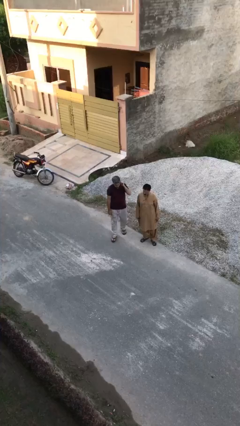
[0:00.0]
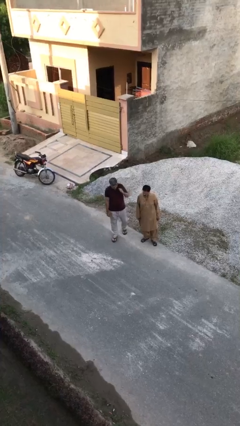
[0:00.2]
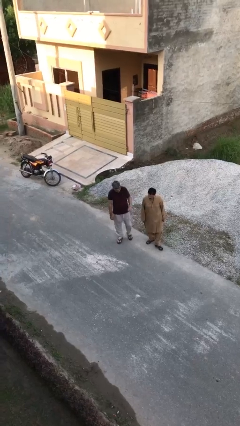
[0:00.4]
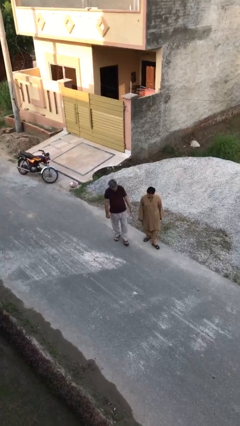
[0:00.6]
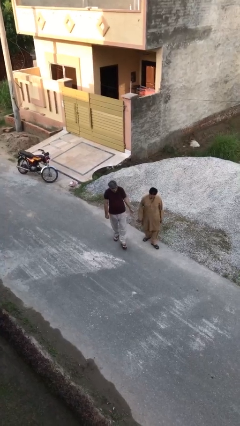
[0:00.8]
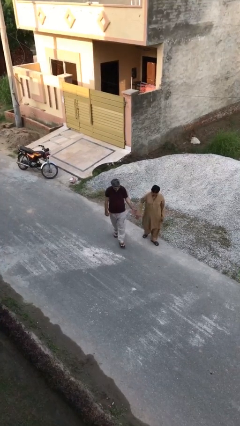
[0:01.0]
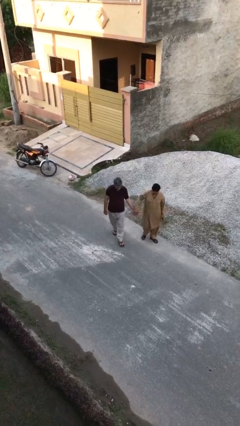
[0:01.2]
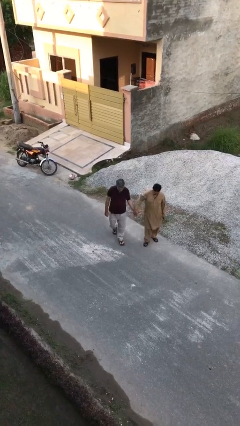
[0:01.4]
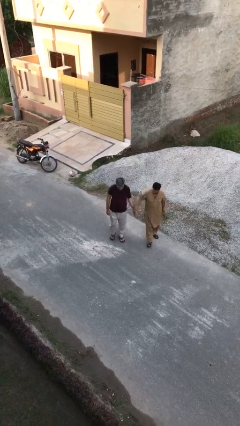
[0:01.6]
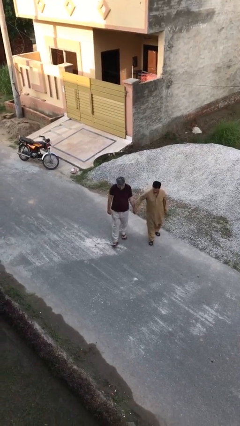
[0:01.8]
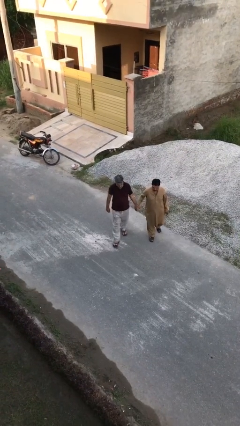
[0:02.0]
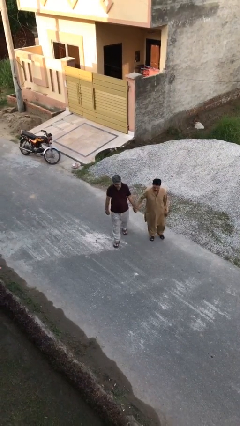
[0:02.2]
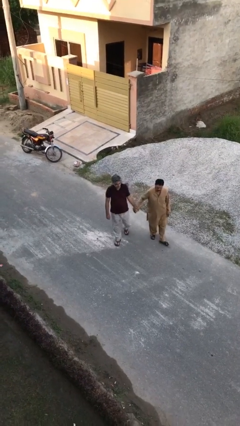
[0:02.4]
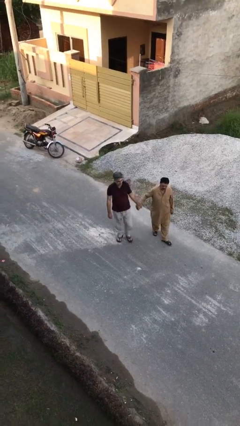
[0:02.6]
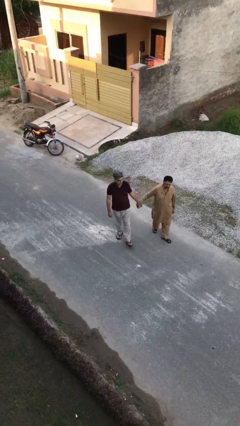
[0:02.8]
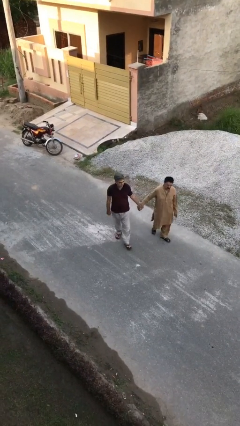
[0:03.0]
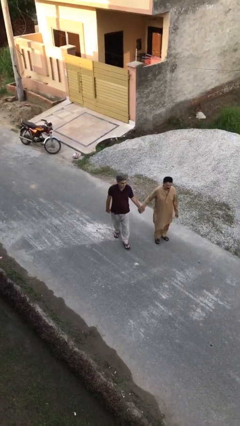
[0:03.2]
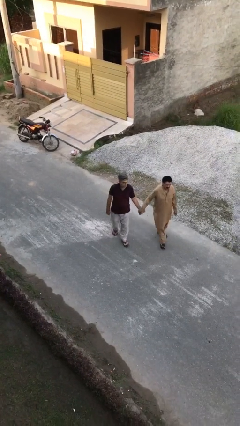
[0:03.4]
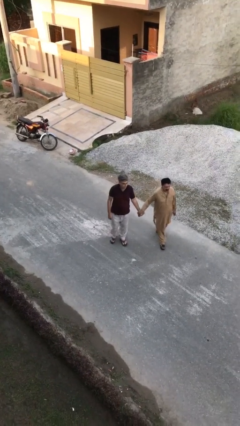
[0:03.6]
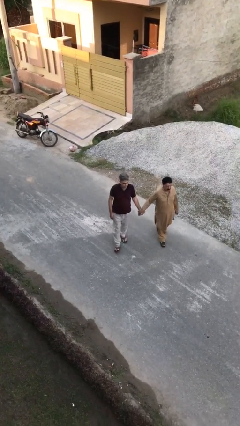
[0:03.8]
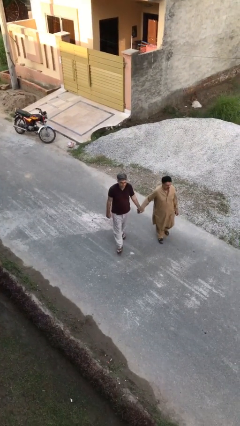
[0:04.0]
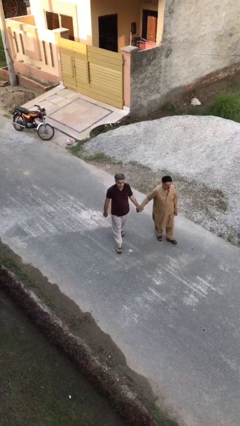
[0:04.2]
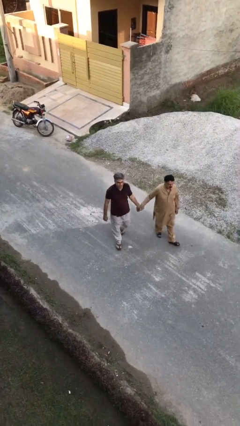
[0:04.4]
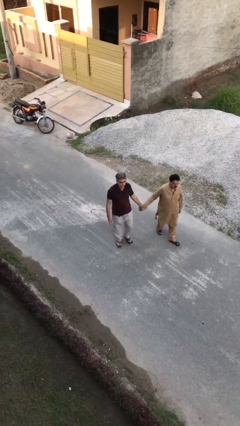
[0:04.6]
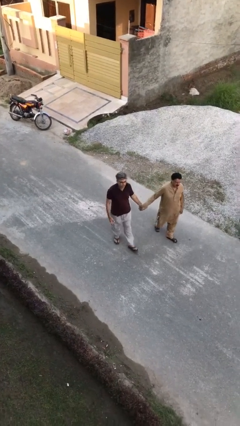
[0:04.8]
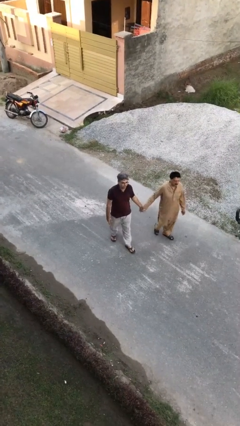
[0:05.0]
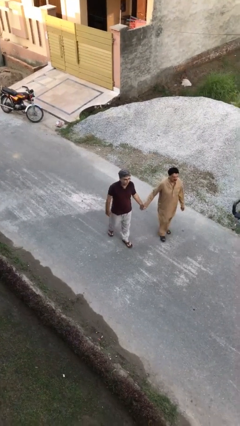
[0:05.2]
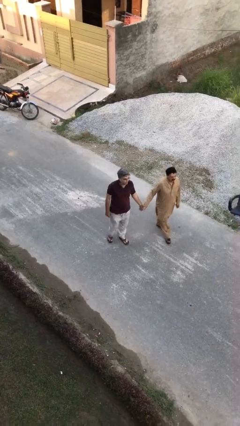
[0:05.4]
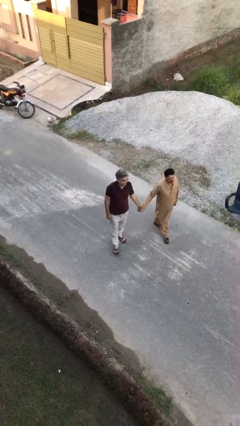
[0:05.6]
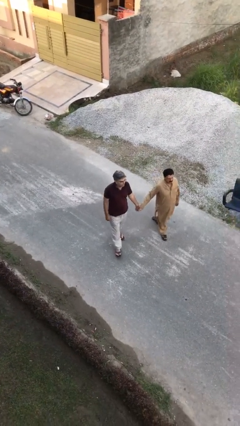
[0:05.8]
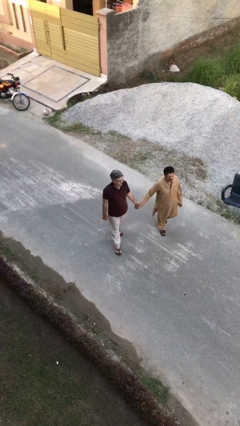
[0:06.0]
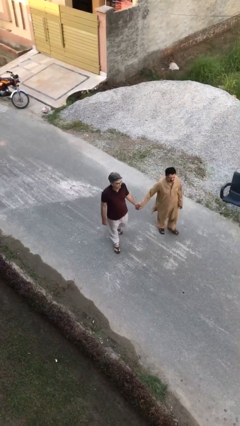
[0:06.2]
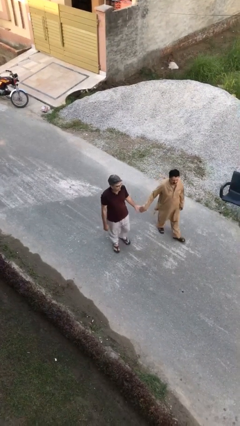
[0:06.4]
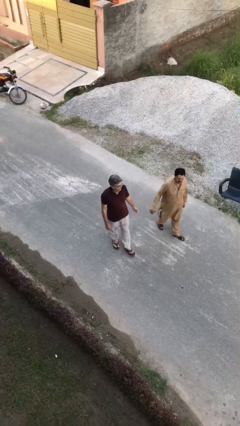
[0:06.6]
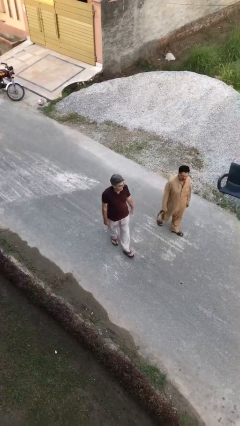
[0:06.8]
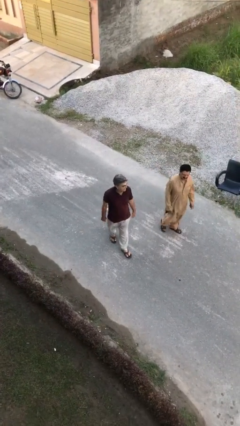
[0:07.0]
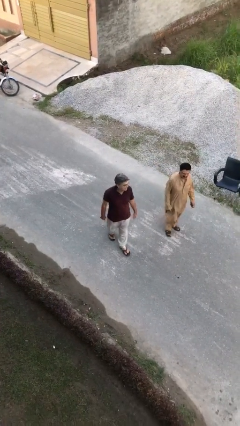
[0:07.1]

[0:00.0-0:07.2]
person holds hand

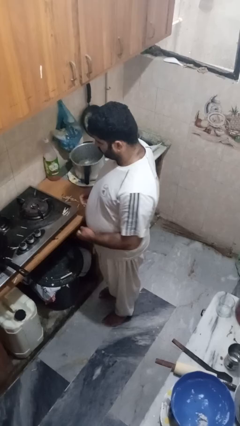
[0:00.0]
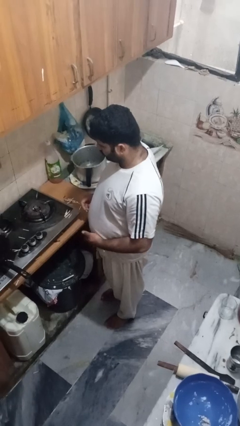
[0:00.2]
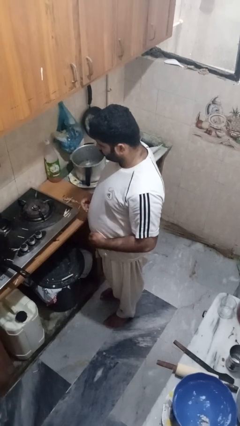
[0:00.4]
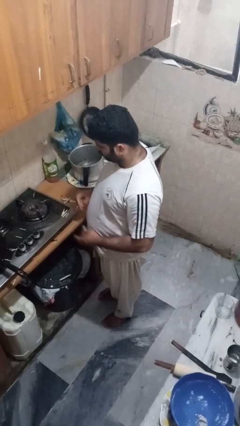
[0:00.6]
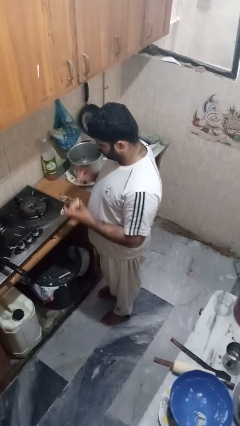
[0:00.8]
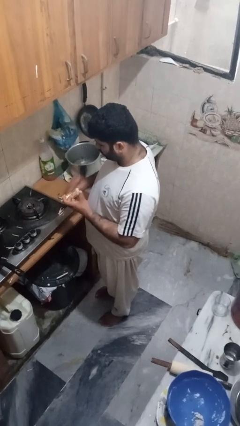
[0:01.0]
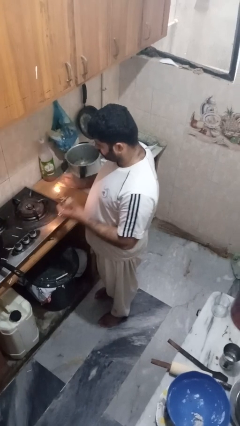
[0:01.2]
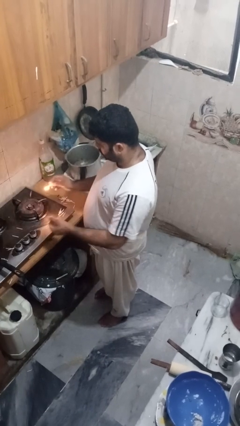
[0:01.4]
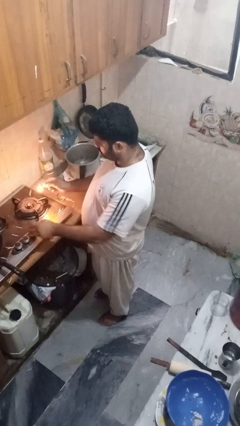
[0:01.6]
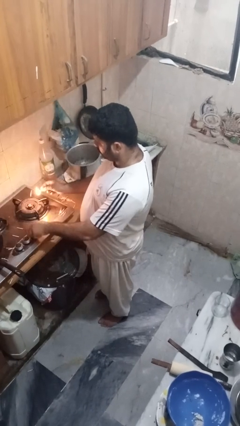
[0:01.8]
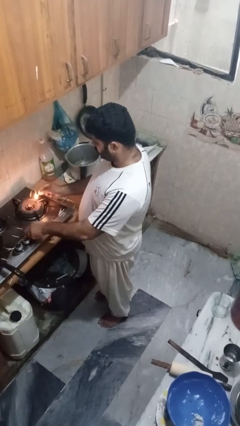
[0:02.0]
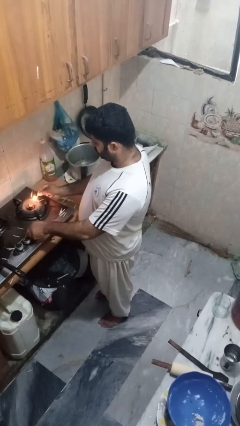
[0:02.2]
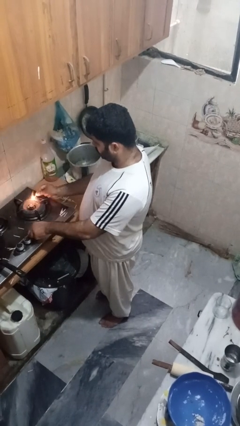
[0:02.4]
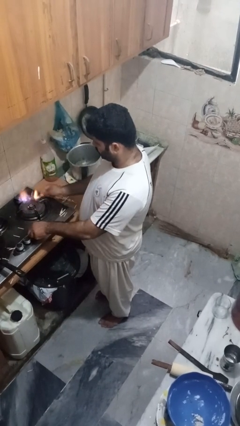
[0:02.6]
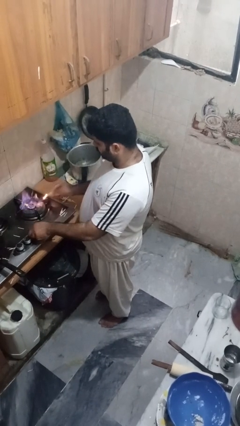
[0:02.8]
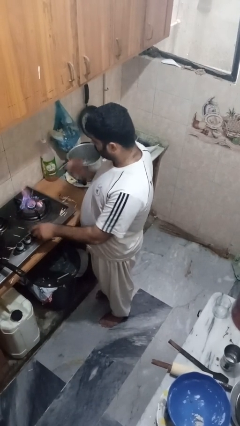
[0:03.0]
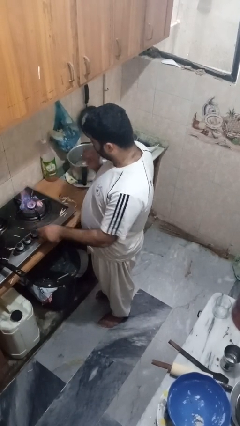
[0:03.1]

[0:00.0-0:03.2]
person turns on stovetop

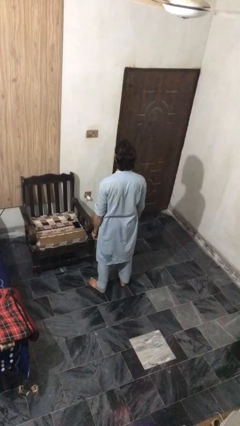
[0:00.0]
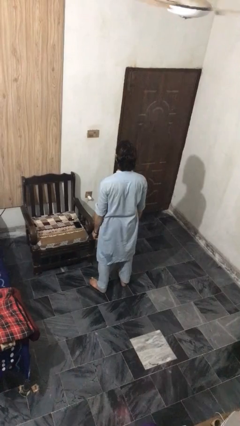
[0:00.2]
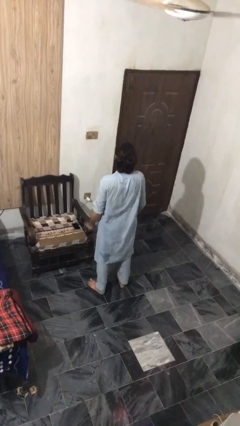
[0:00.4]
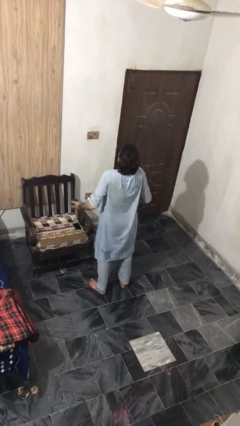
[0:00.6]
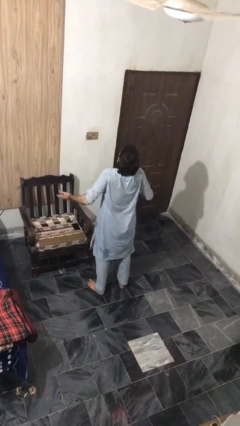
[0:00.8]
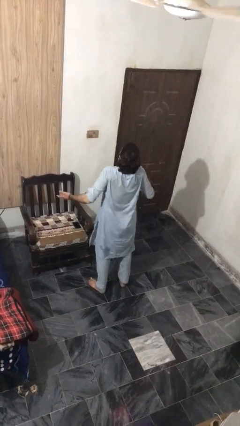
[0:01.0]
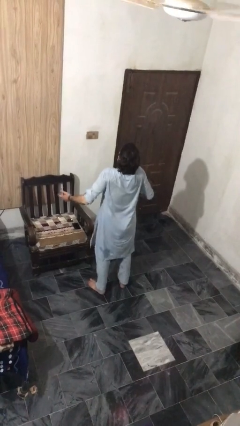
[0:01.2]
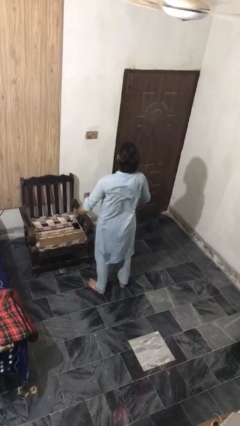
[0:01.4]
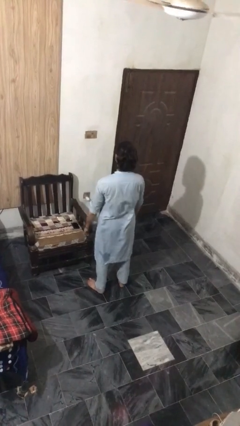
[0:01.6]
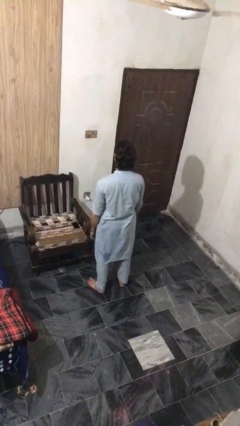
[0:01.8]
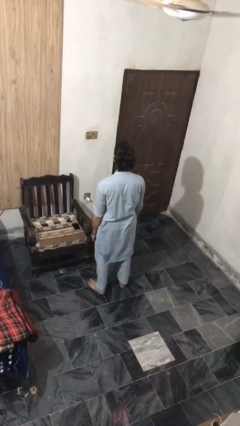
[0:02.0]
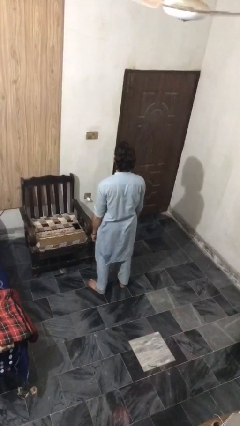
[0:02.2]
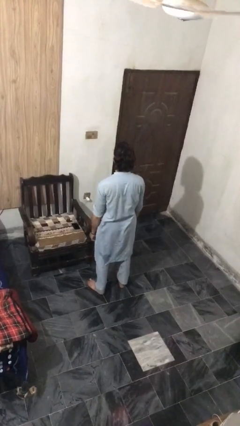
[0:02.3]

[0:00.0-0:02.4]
person shrugs

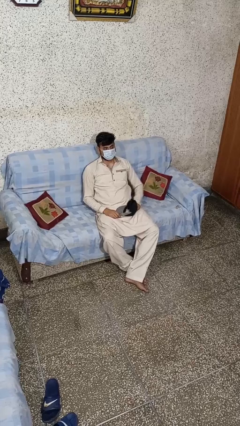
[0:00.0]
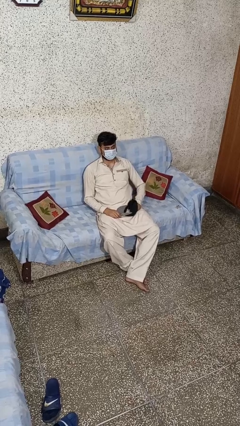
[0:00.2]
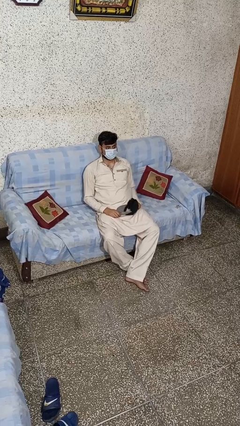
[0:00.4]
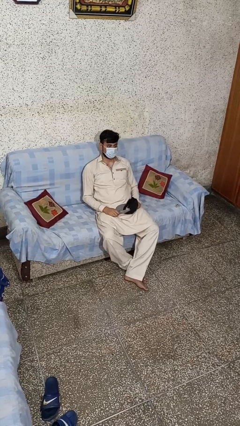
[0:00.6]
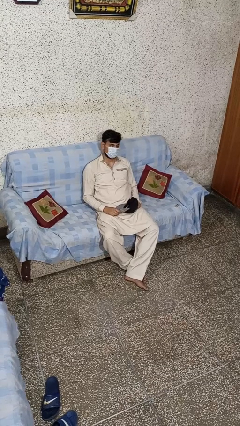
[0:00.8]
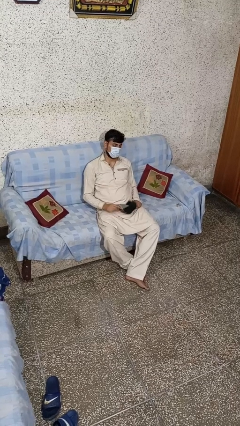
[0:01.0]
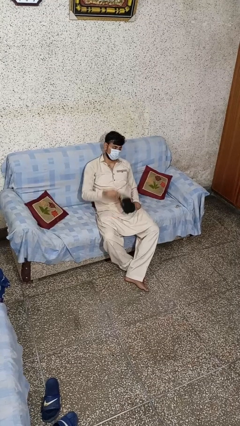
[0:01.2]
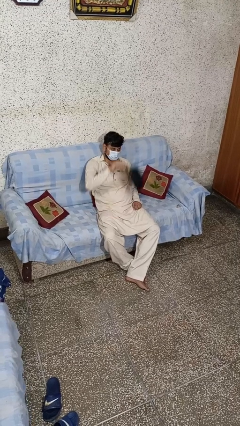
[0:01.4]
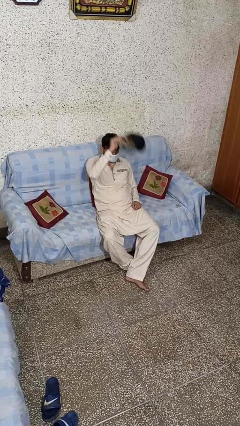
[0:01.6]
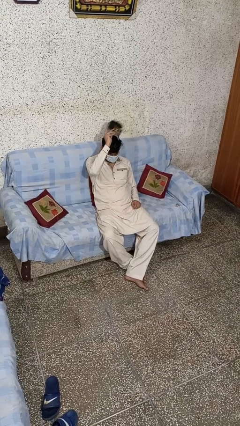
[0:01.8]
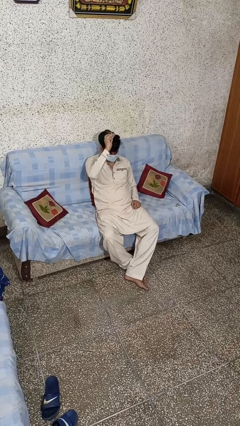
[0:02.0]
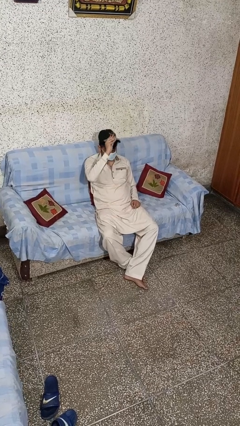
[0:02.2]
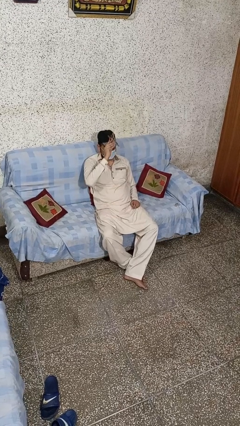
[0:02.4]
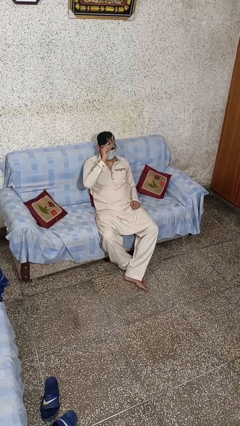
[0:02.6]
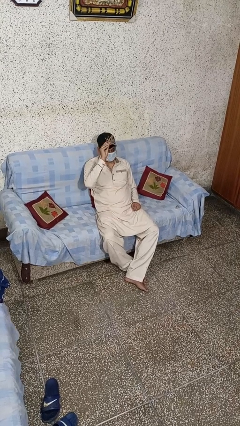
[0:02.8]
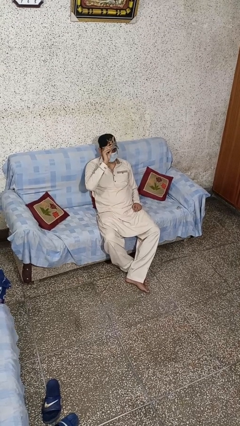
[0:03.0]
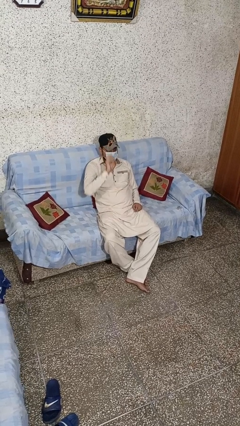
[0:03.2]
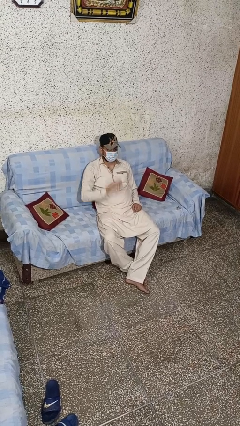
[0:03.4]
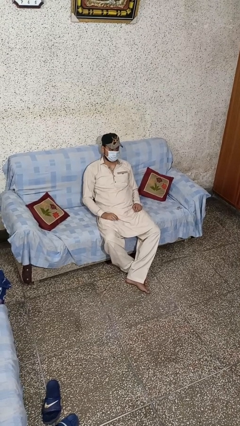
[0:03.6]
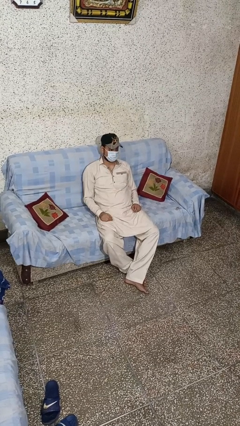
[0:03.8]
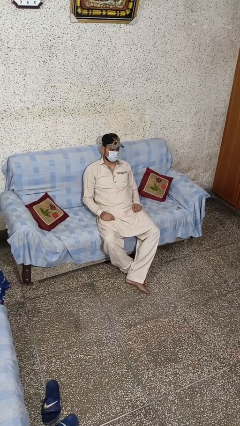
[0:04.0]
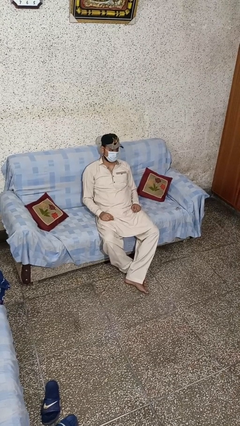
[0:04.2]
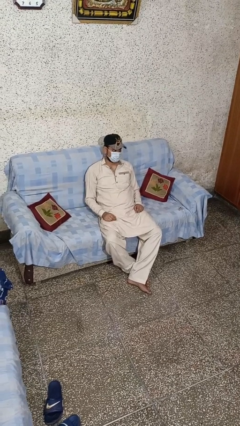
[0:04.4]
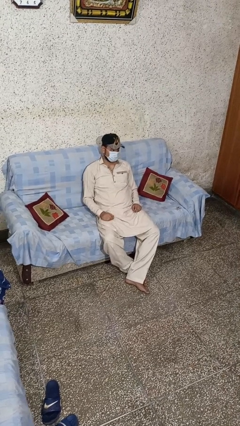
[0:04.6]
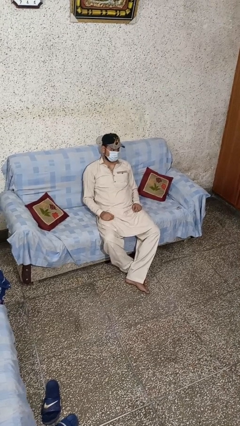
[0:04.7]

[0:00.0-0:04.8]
person puts on hat
